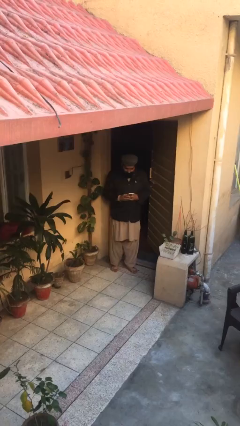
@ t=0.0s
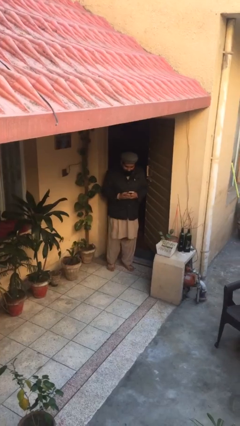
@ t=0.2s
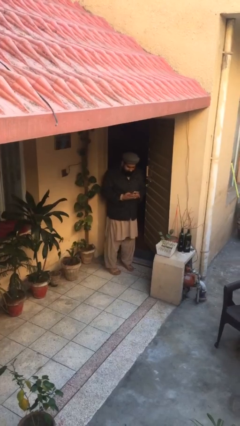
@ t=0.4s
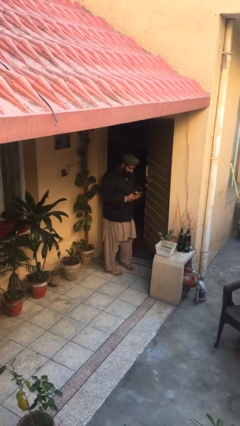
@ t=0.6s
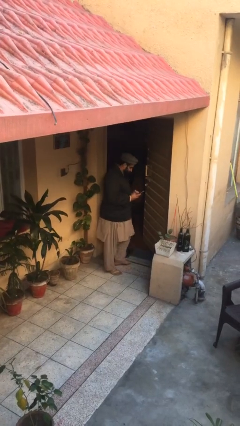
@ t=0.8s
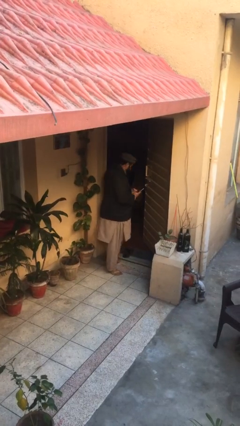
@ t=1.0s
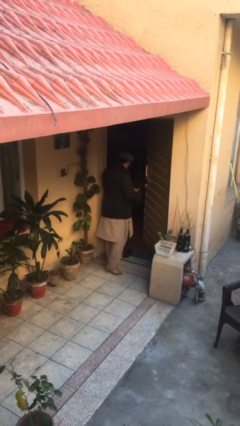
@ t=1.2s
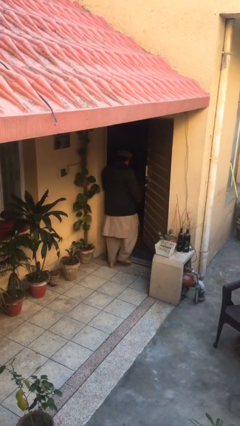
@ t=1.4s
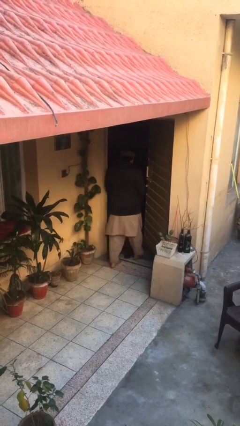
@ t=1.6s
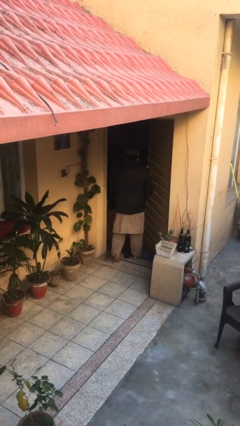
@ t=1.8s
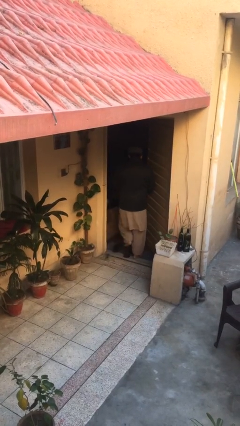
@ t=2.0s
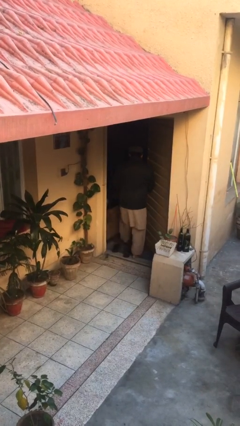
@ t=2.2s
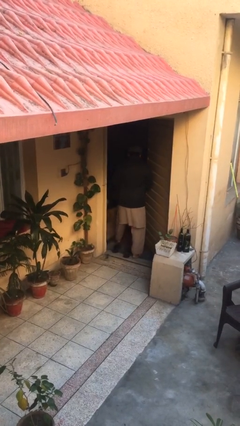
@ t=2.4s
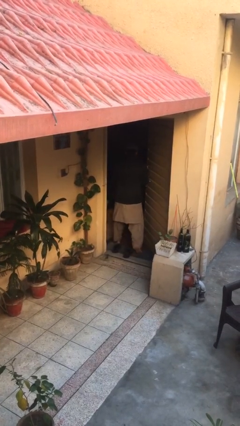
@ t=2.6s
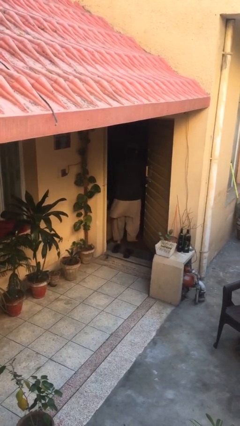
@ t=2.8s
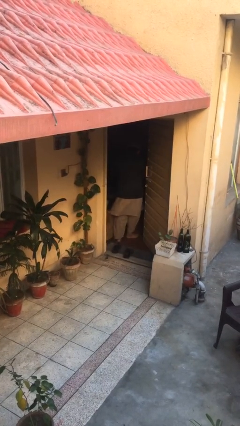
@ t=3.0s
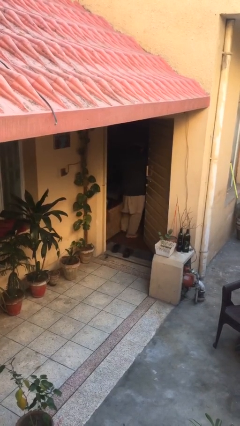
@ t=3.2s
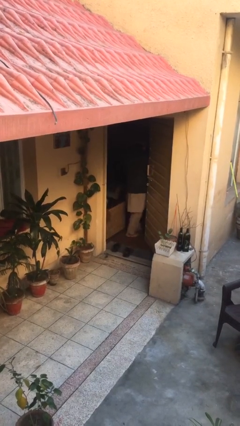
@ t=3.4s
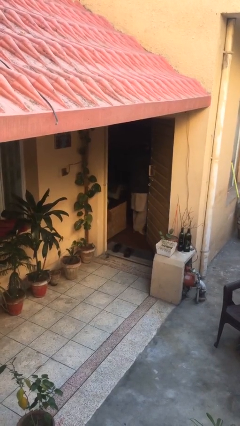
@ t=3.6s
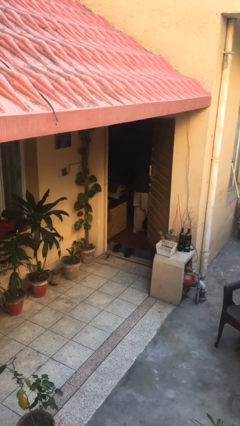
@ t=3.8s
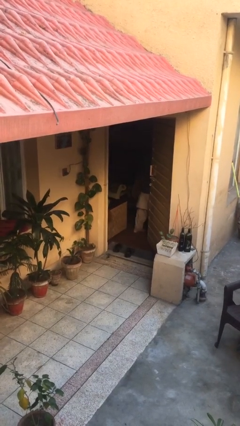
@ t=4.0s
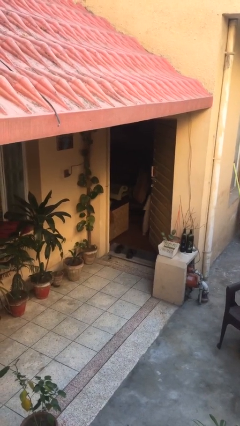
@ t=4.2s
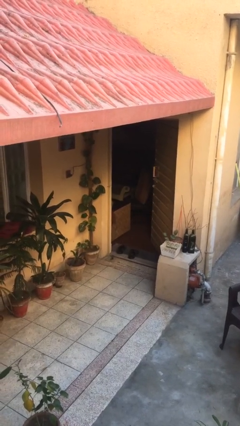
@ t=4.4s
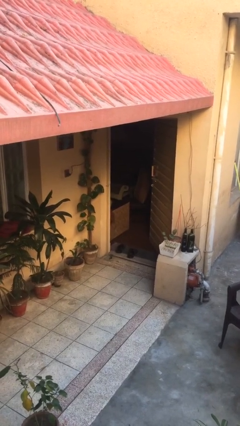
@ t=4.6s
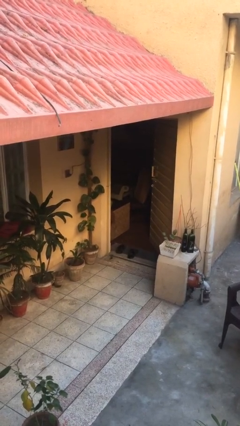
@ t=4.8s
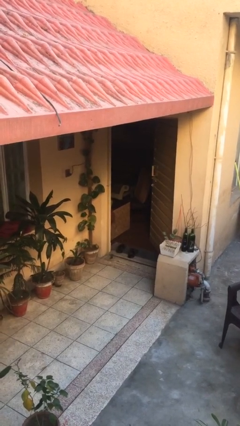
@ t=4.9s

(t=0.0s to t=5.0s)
person exits scene through structure

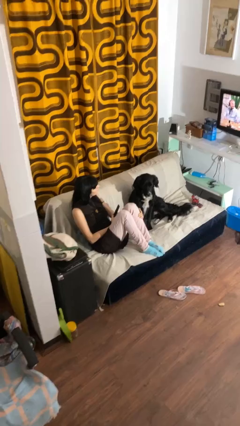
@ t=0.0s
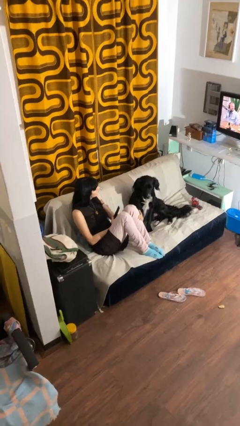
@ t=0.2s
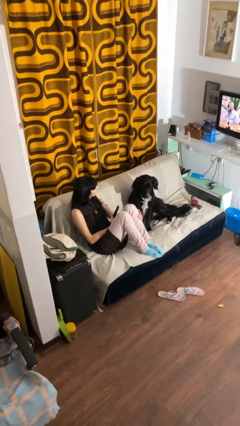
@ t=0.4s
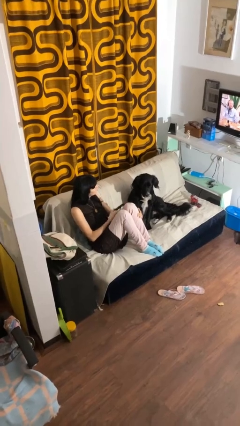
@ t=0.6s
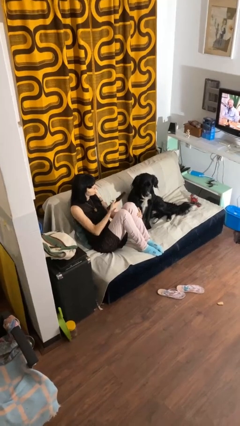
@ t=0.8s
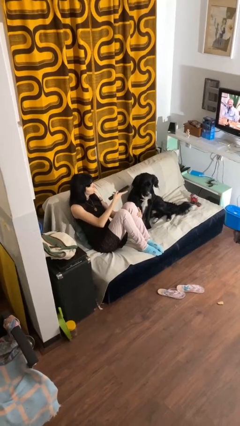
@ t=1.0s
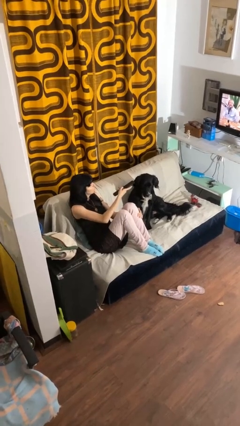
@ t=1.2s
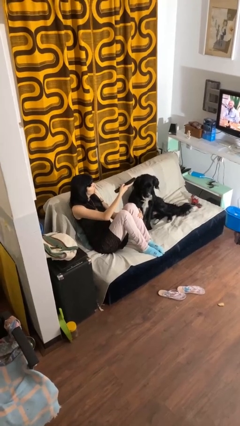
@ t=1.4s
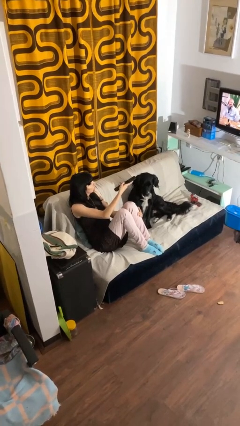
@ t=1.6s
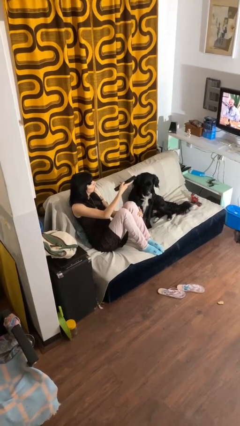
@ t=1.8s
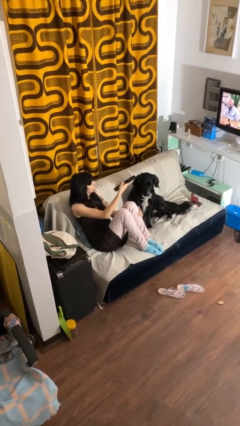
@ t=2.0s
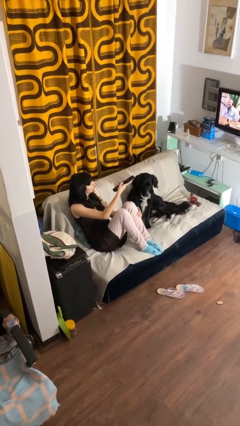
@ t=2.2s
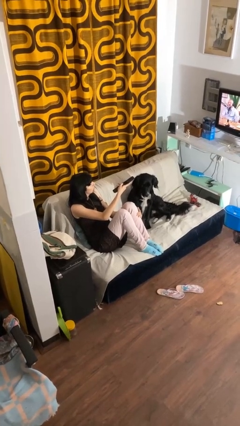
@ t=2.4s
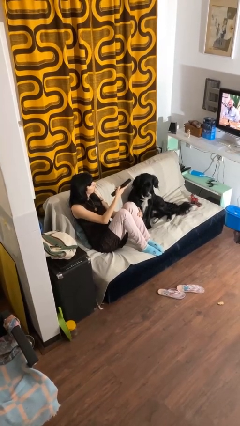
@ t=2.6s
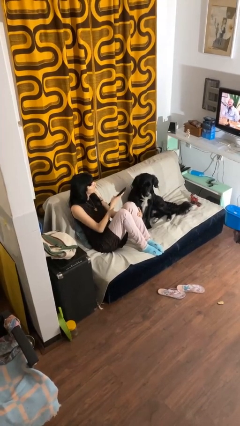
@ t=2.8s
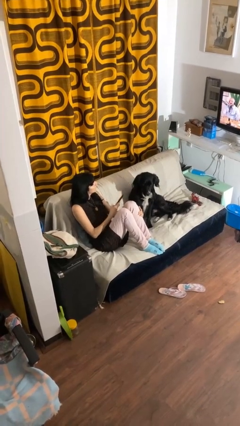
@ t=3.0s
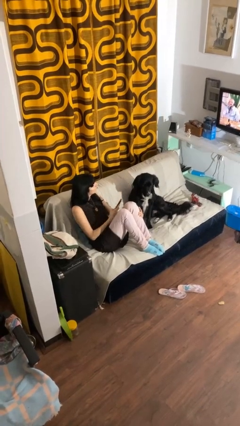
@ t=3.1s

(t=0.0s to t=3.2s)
person uses television remote

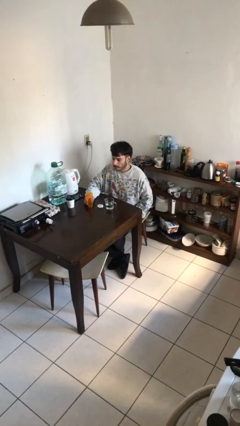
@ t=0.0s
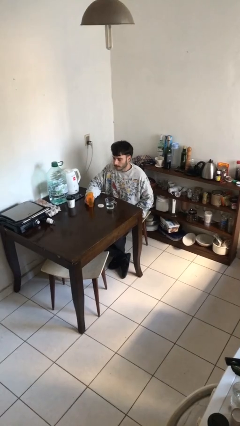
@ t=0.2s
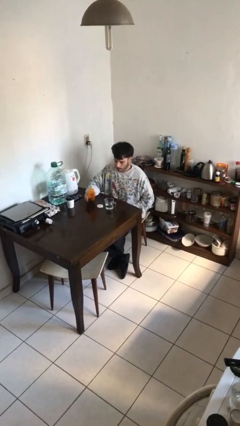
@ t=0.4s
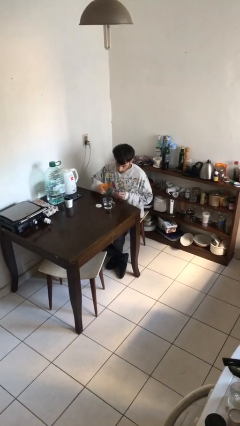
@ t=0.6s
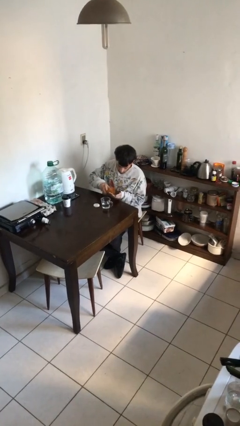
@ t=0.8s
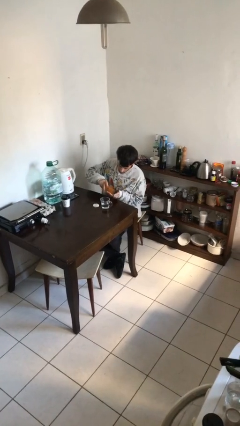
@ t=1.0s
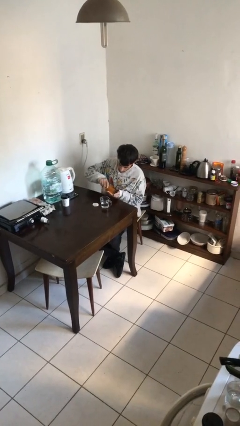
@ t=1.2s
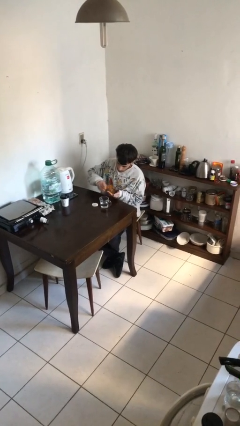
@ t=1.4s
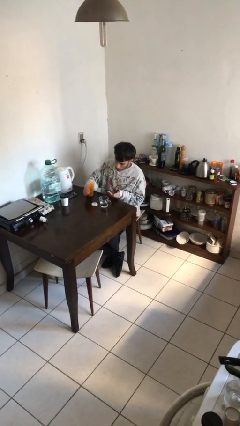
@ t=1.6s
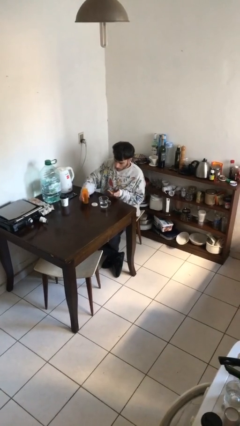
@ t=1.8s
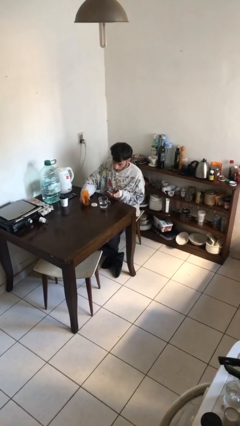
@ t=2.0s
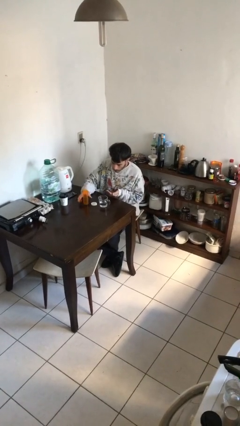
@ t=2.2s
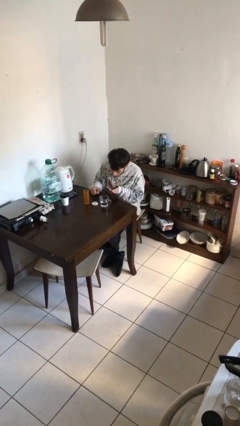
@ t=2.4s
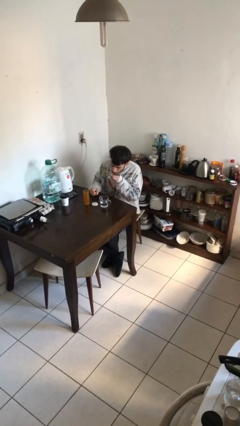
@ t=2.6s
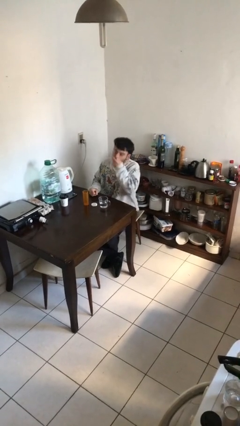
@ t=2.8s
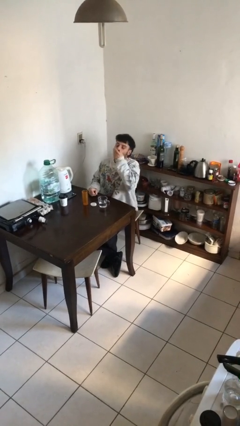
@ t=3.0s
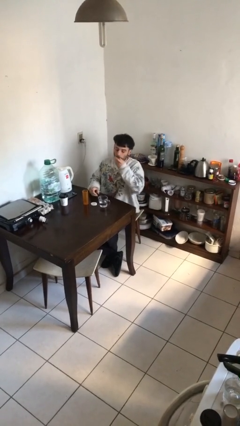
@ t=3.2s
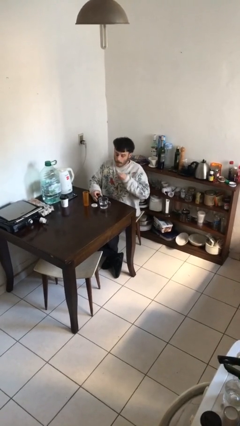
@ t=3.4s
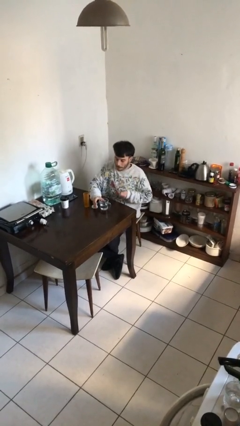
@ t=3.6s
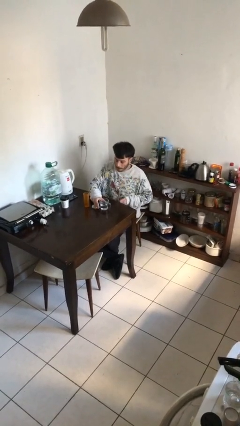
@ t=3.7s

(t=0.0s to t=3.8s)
person takes medicine pills

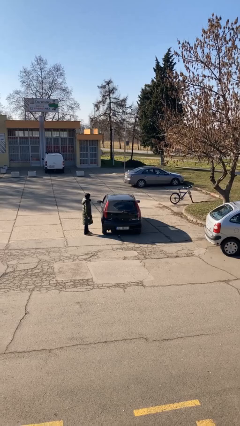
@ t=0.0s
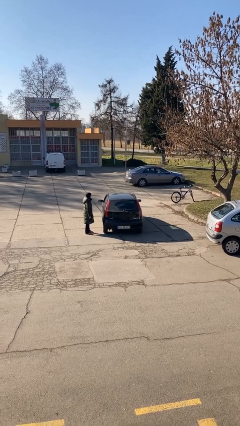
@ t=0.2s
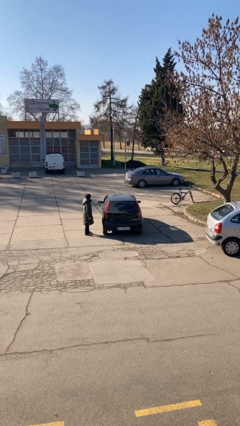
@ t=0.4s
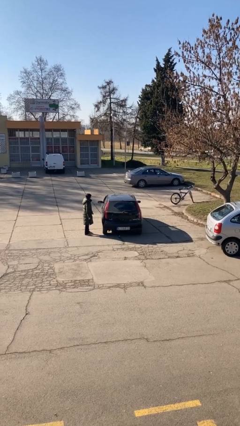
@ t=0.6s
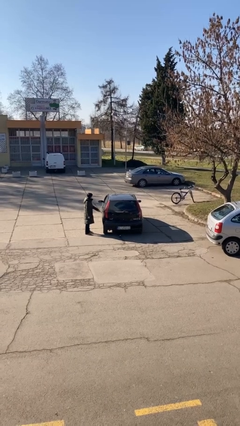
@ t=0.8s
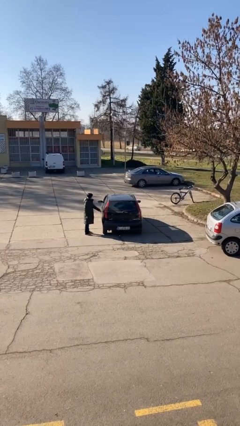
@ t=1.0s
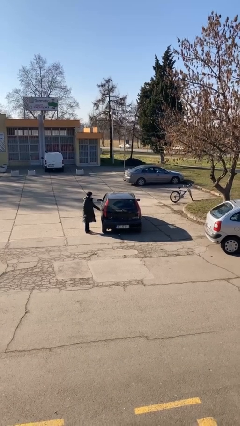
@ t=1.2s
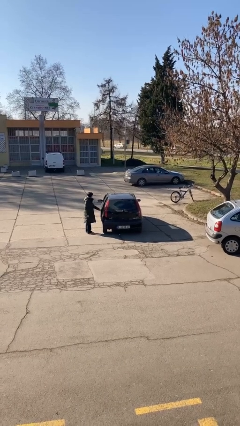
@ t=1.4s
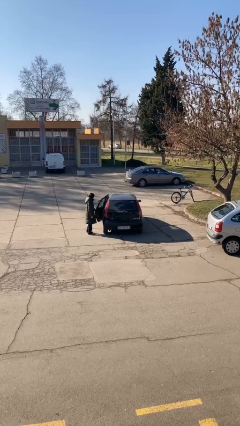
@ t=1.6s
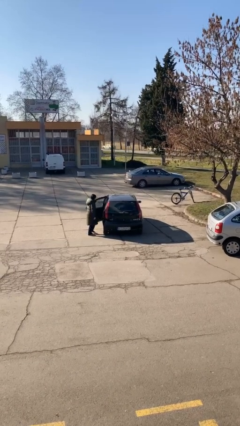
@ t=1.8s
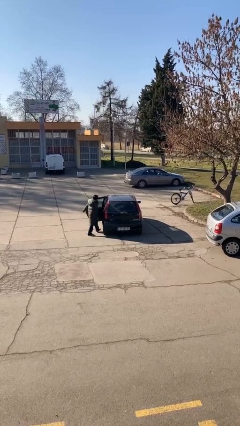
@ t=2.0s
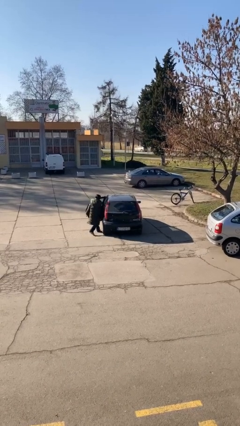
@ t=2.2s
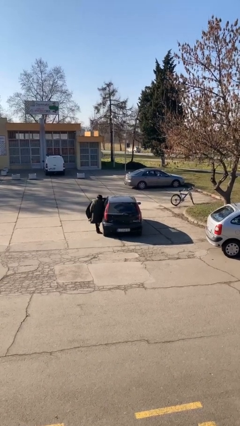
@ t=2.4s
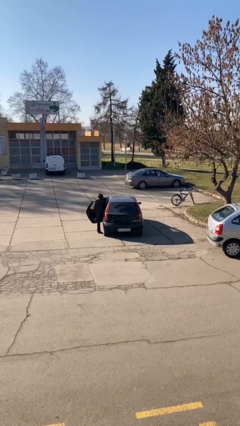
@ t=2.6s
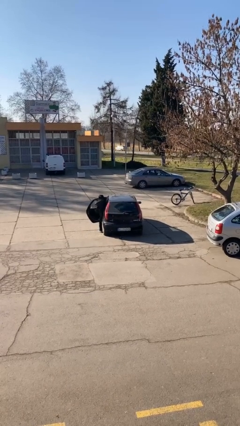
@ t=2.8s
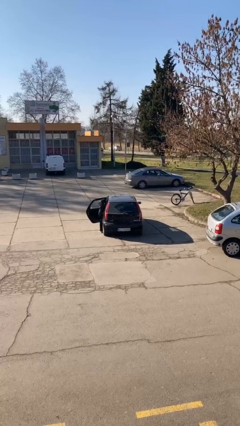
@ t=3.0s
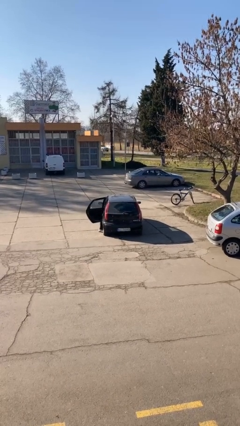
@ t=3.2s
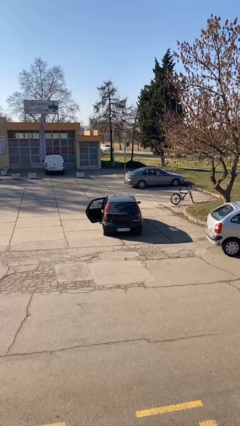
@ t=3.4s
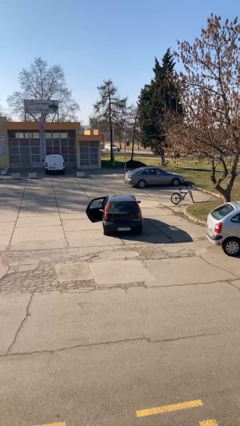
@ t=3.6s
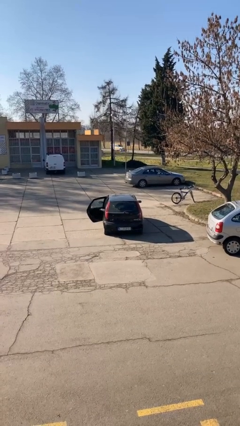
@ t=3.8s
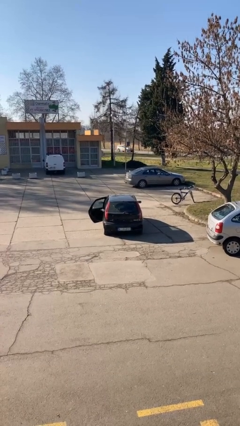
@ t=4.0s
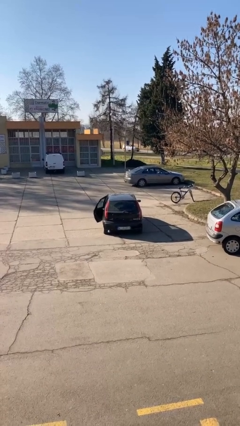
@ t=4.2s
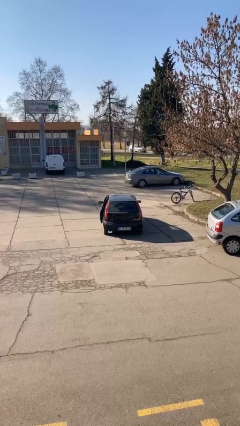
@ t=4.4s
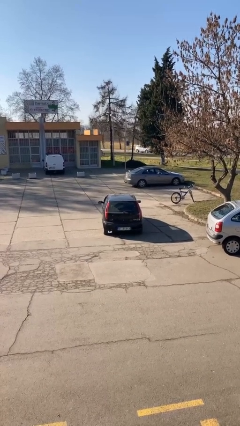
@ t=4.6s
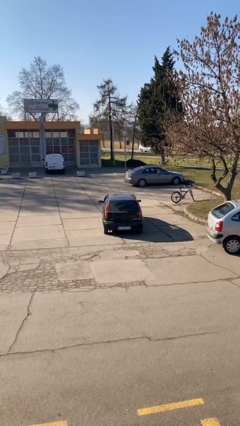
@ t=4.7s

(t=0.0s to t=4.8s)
car picks up person

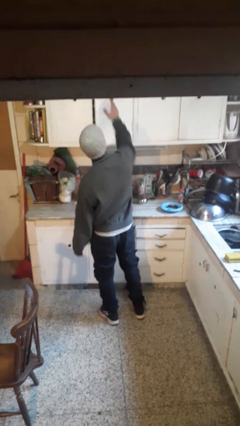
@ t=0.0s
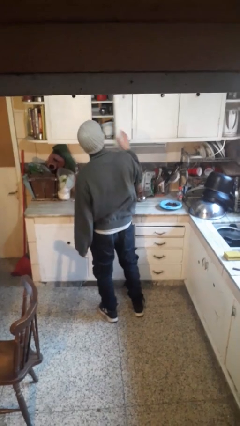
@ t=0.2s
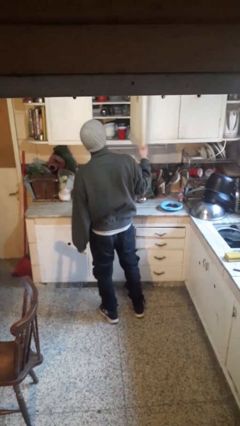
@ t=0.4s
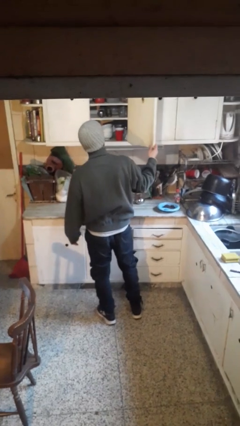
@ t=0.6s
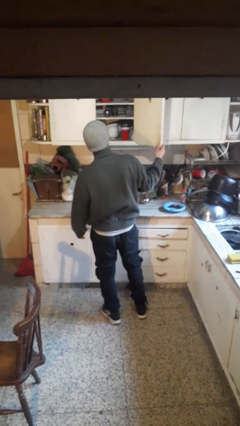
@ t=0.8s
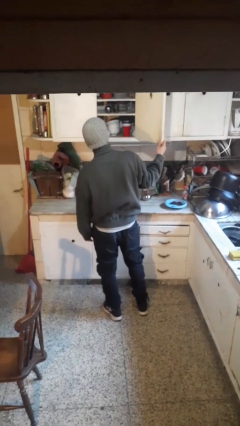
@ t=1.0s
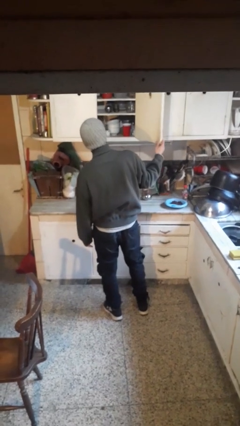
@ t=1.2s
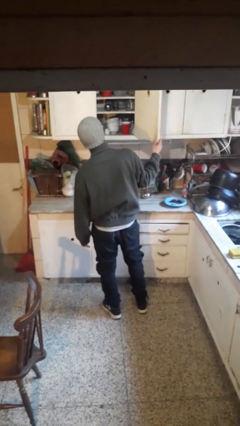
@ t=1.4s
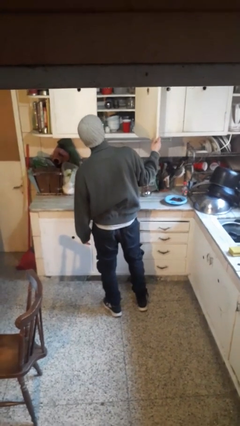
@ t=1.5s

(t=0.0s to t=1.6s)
person opens cabinet
